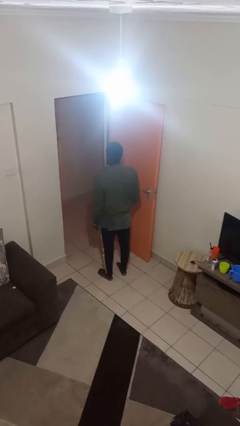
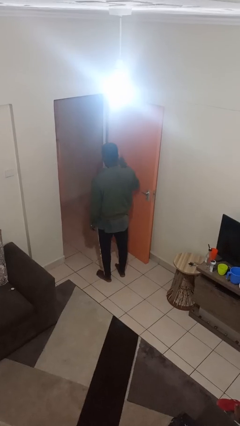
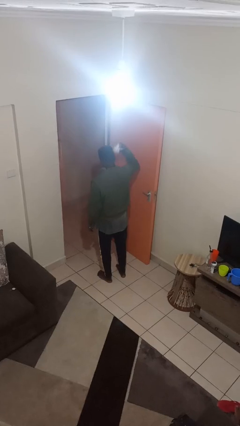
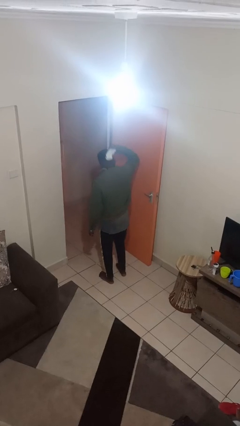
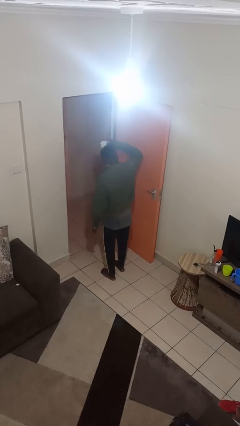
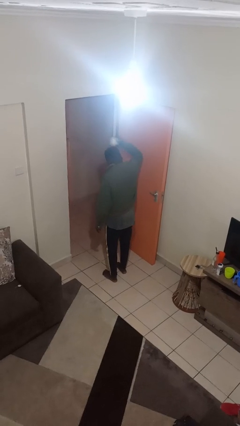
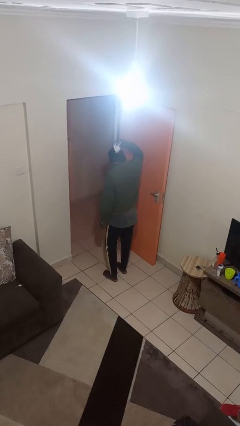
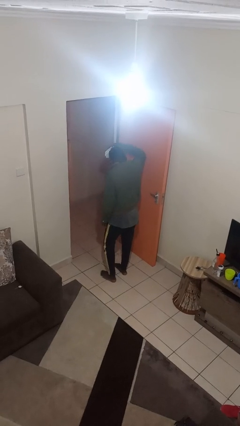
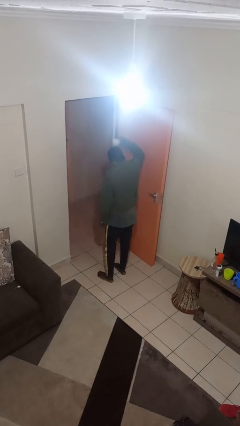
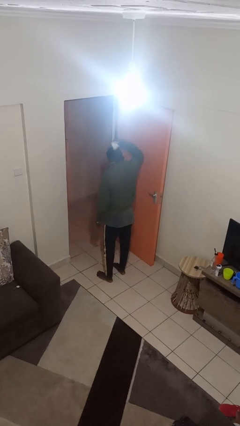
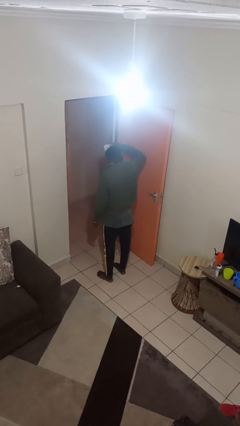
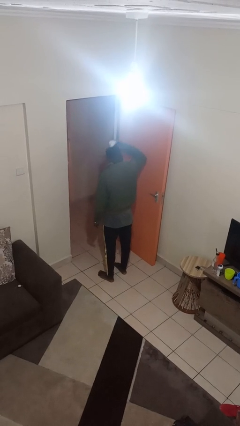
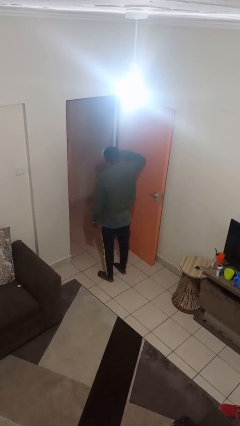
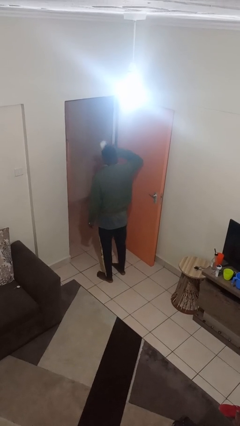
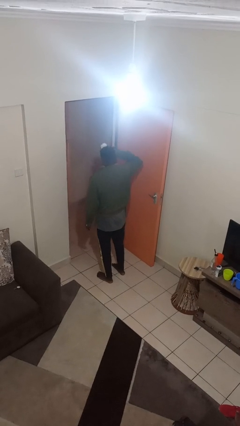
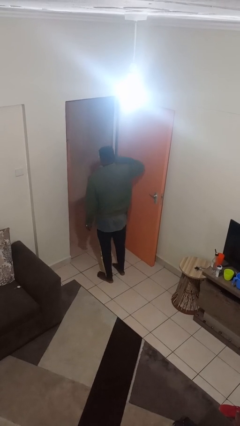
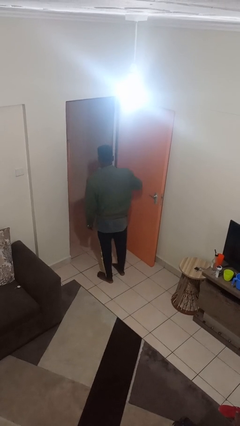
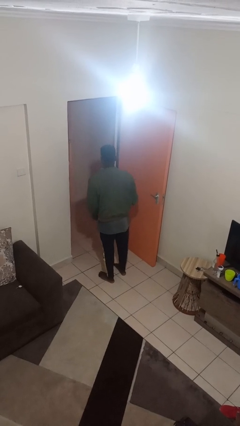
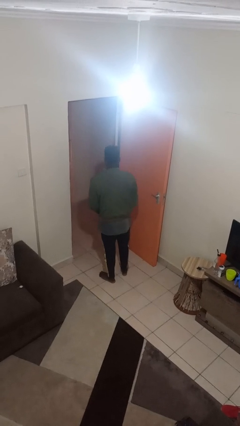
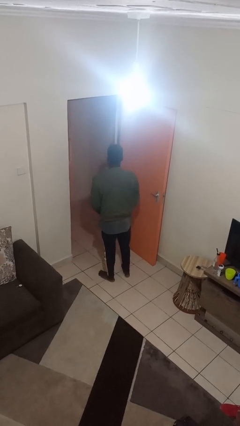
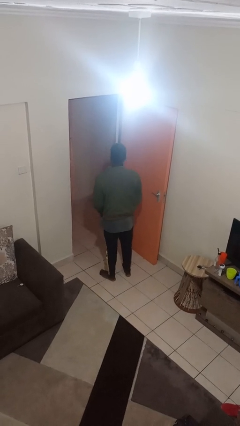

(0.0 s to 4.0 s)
person brushes hair

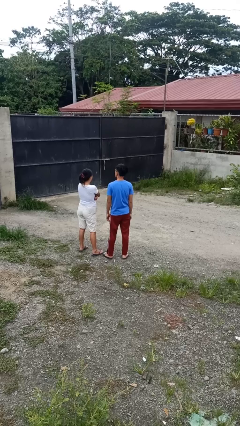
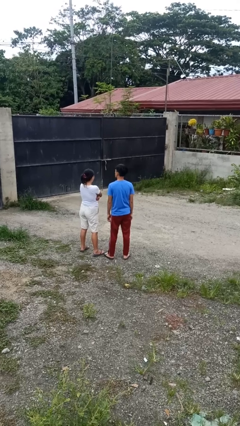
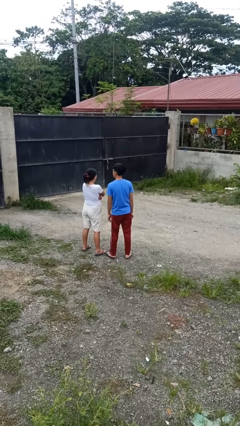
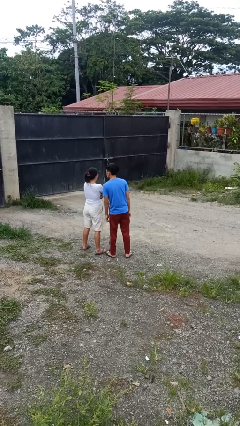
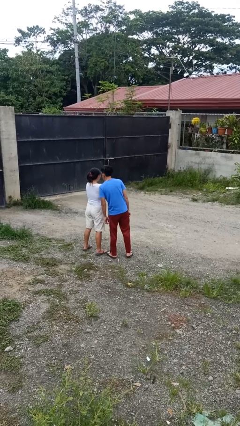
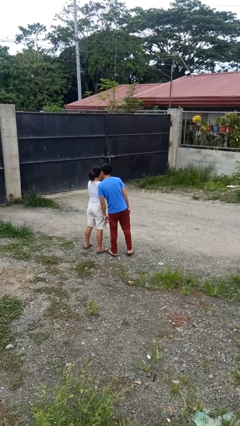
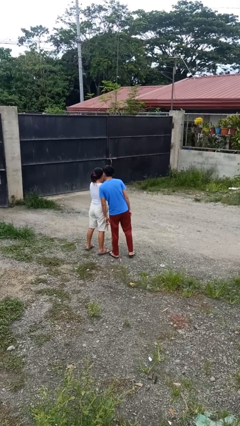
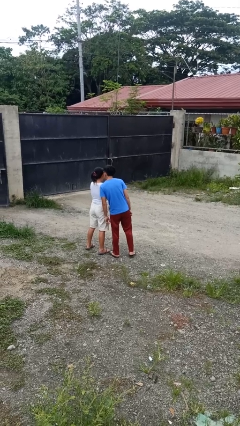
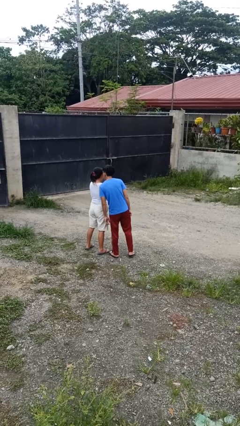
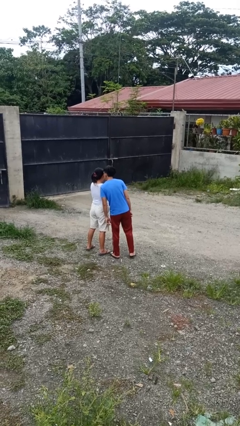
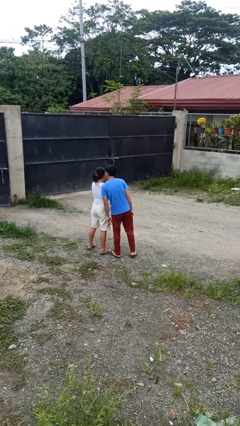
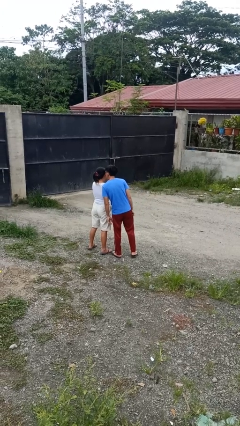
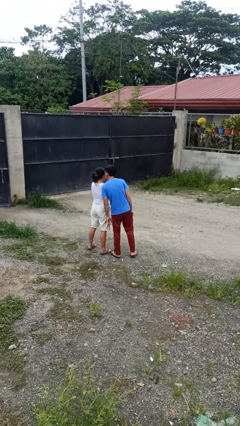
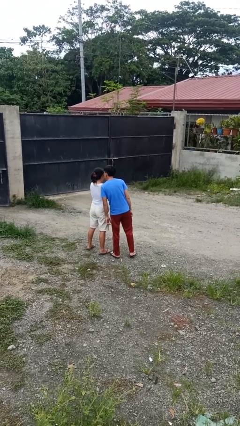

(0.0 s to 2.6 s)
person kisses cheek of person

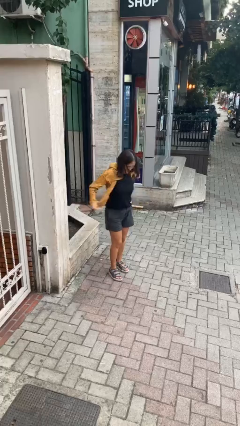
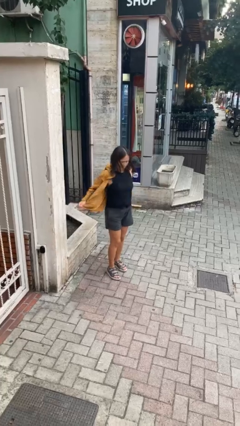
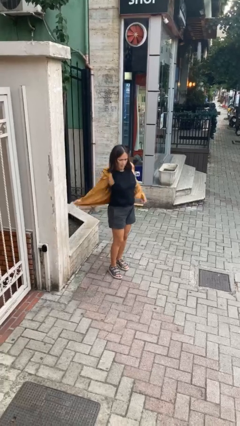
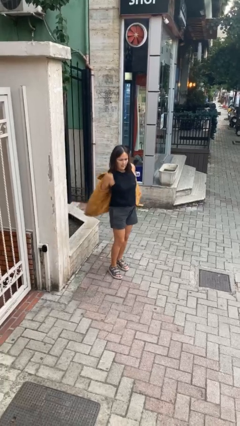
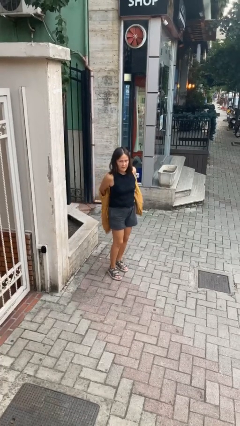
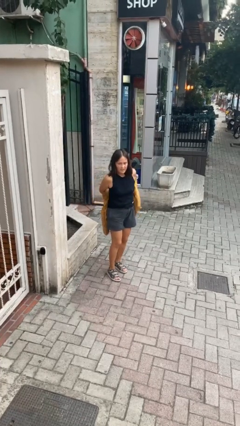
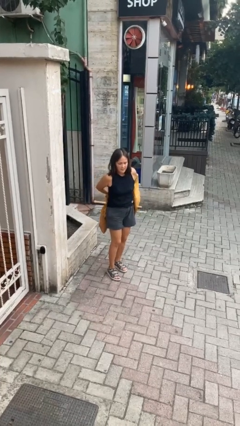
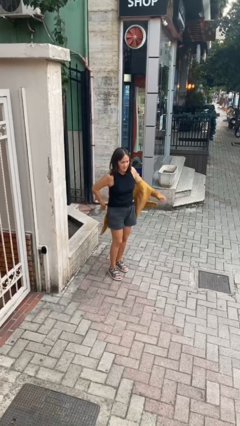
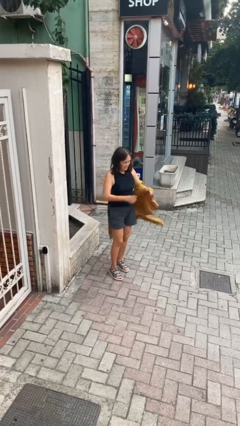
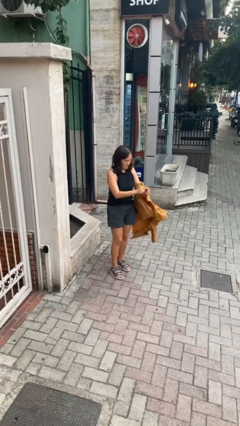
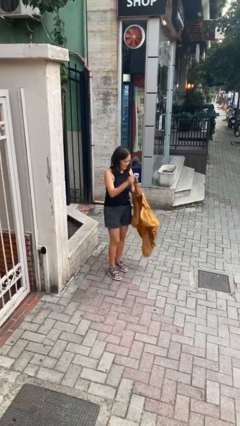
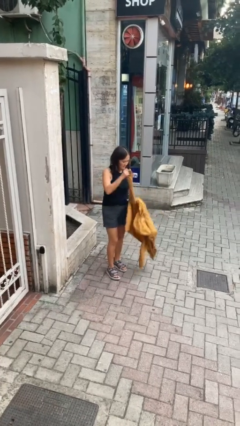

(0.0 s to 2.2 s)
person takes off jacket

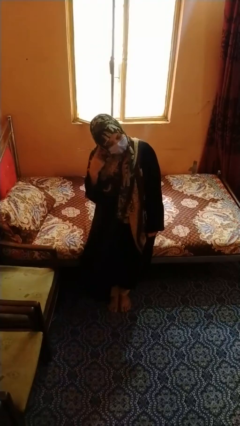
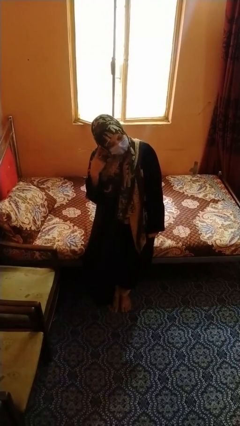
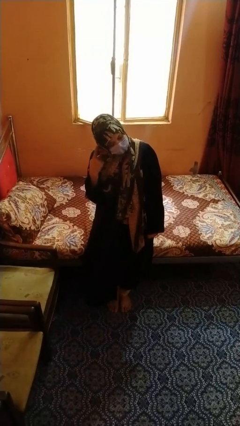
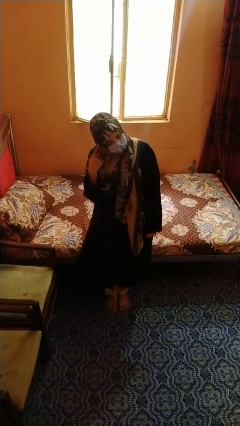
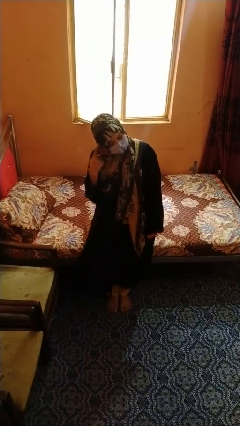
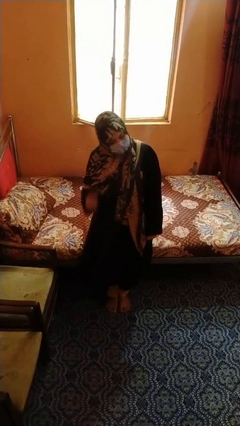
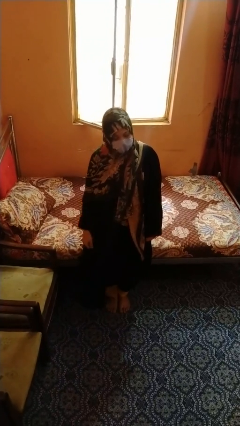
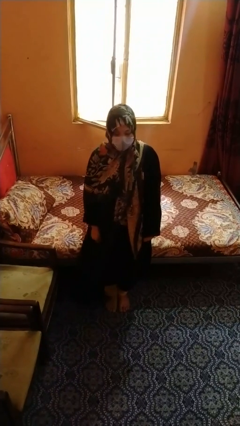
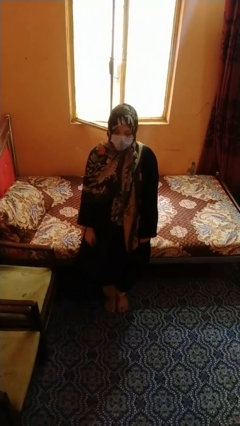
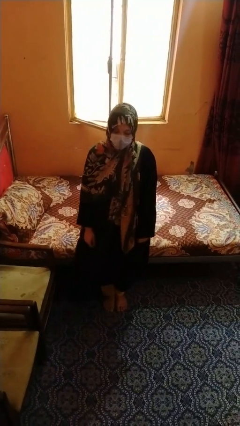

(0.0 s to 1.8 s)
person gestures listen closely

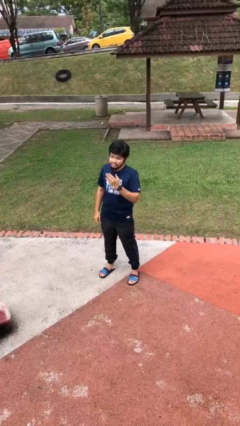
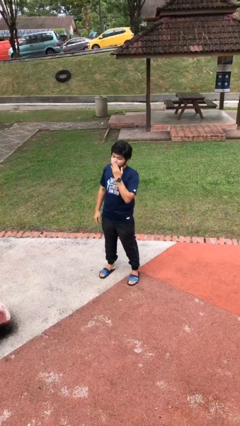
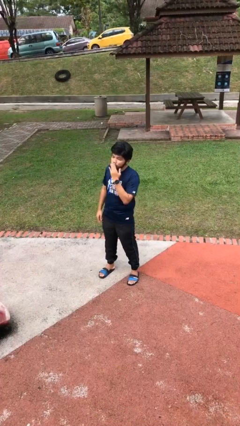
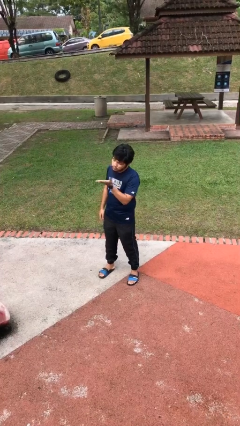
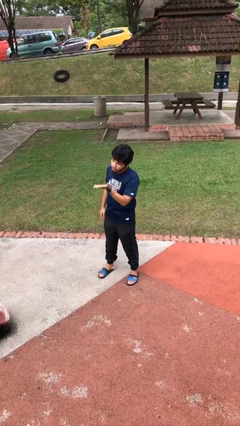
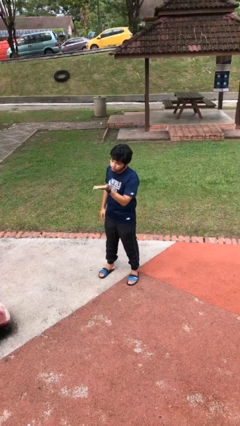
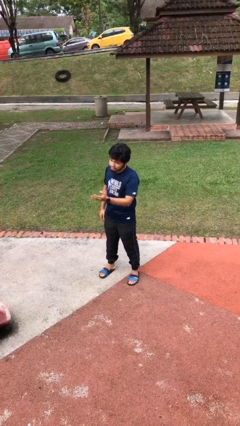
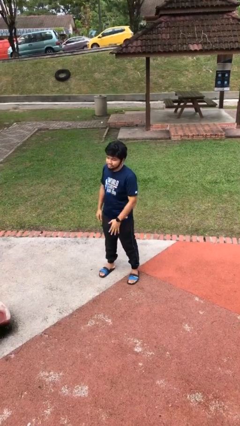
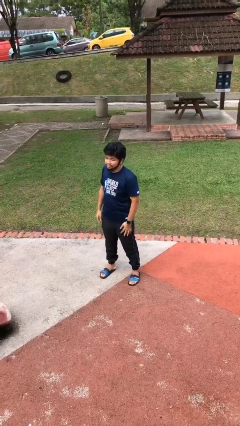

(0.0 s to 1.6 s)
person gestures blow kiss

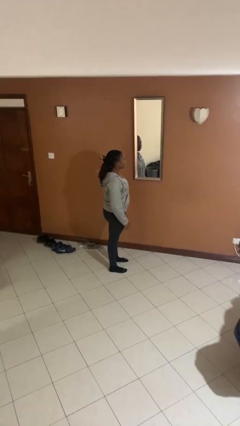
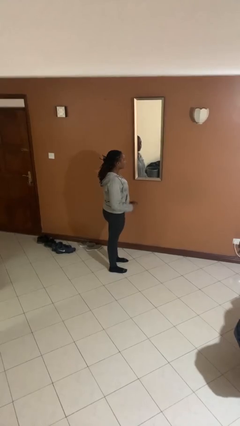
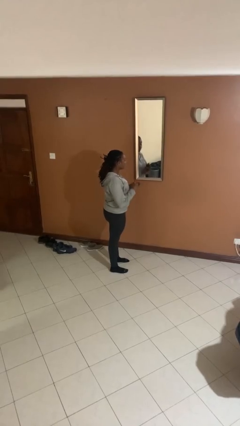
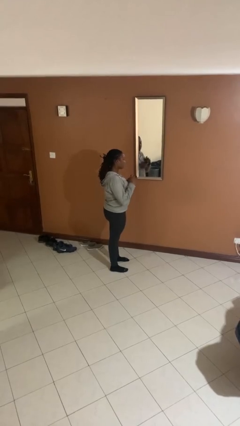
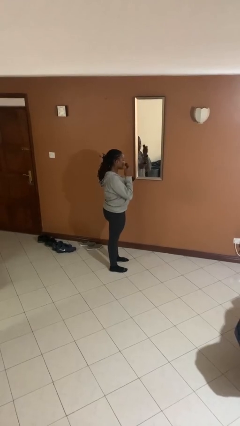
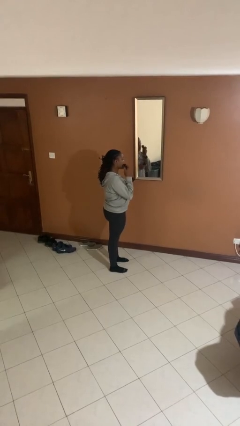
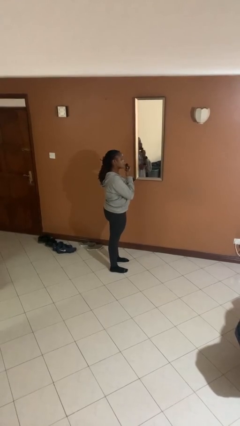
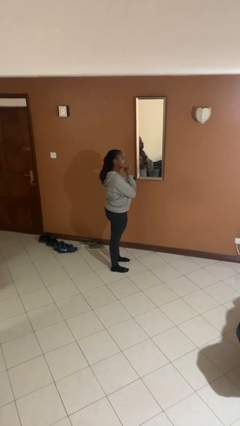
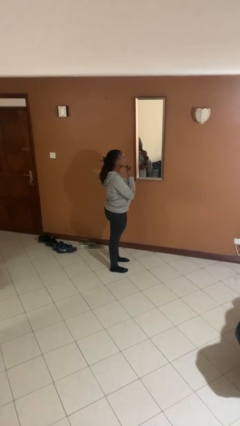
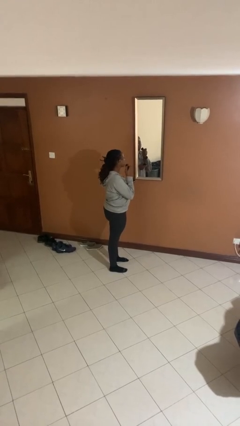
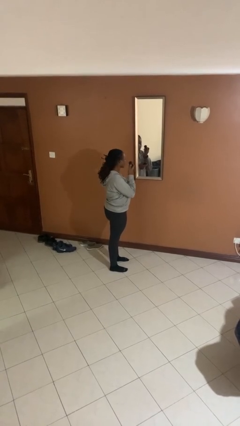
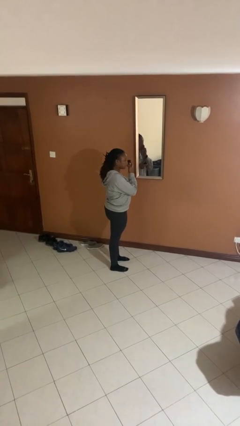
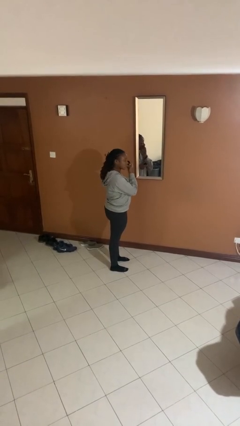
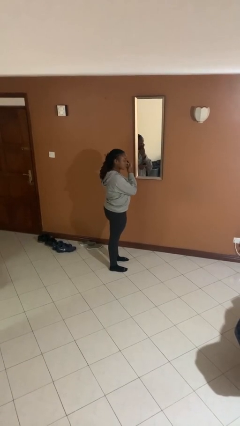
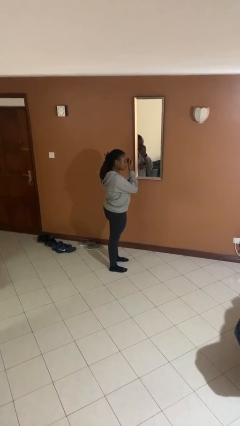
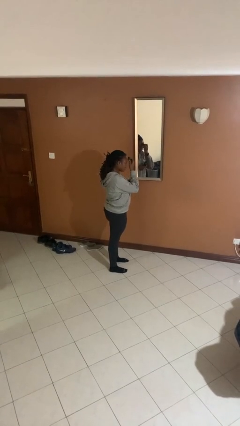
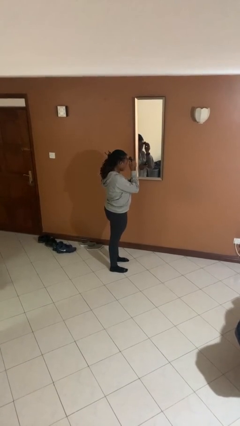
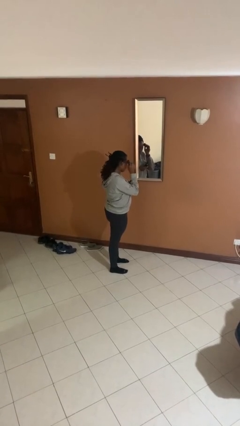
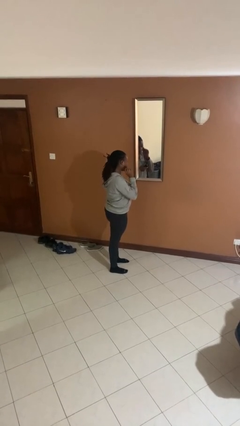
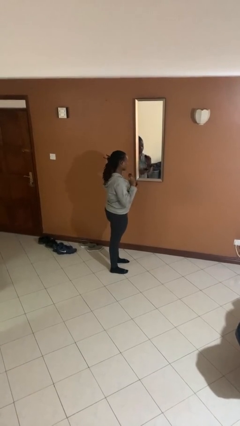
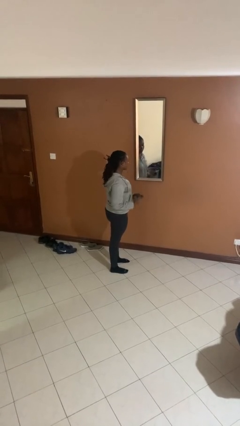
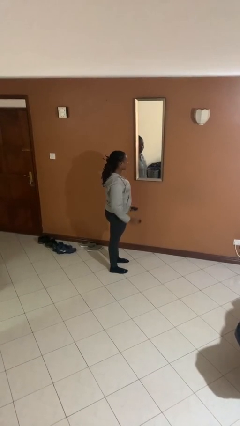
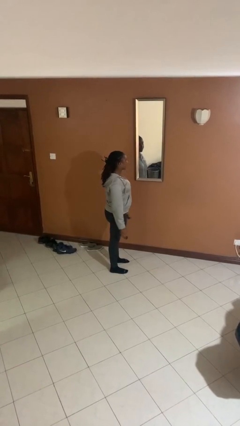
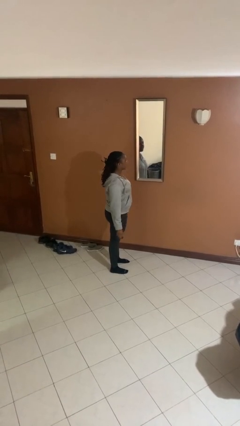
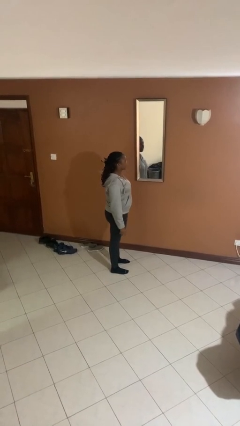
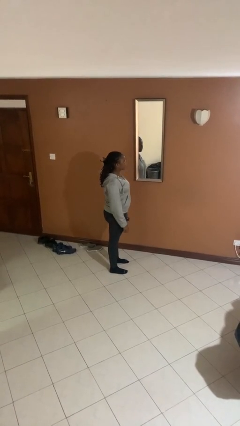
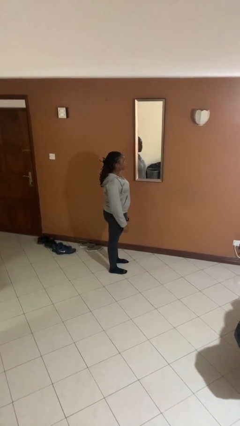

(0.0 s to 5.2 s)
person applies foundation makeup
